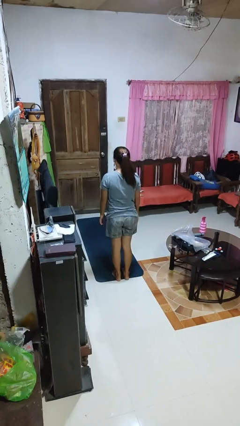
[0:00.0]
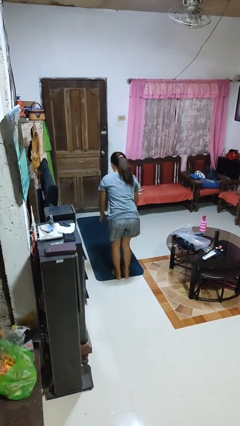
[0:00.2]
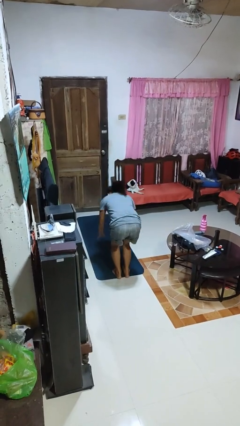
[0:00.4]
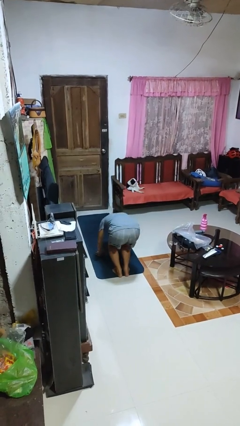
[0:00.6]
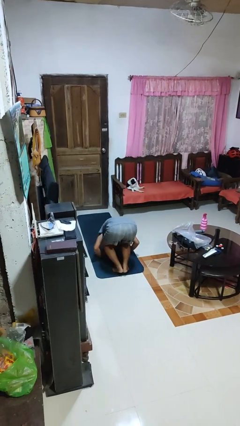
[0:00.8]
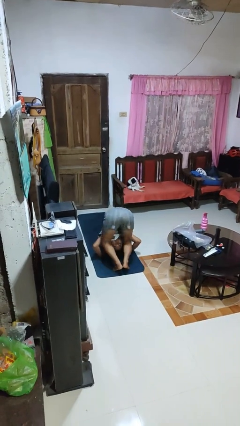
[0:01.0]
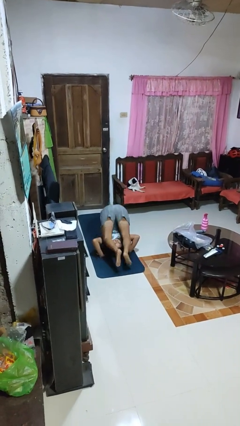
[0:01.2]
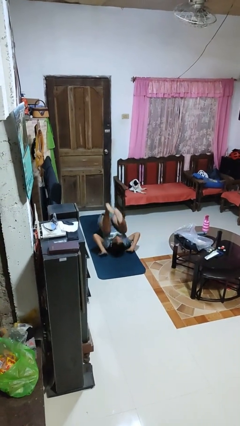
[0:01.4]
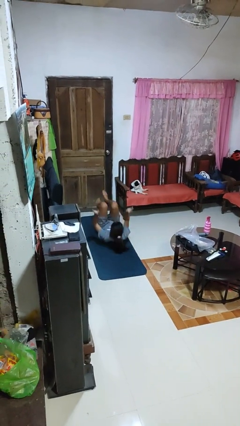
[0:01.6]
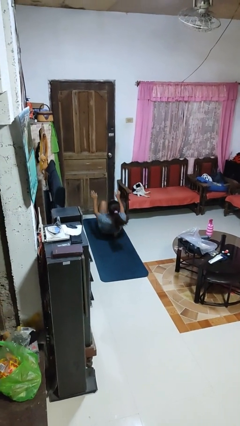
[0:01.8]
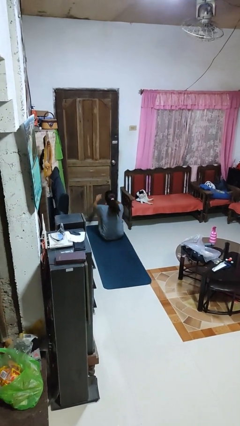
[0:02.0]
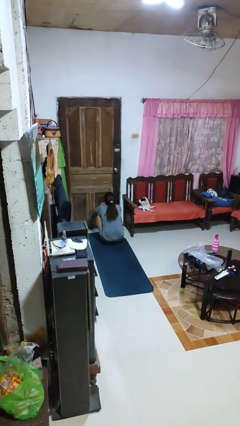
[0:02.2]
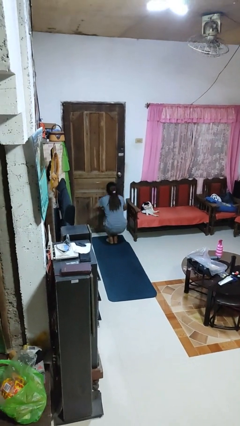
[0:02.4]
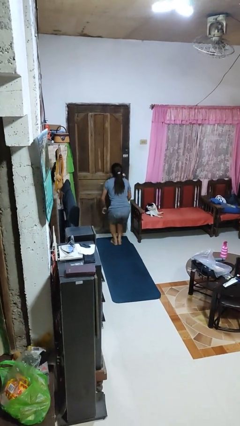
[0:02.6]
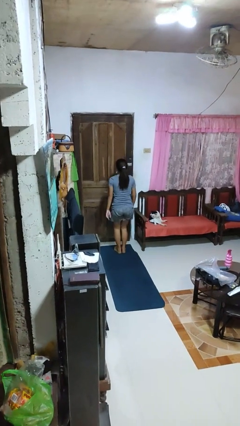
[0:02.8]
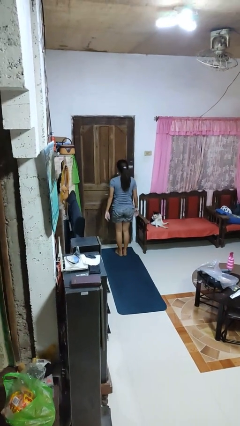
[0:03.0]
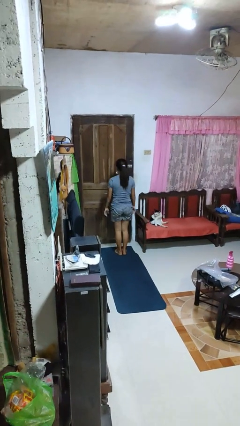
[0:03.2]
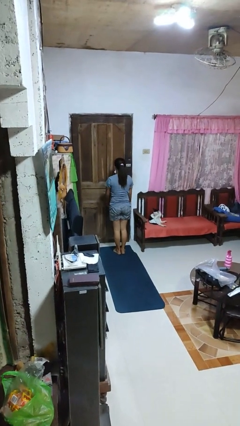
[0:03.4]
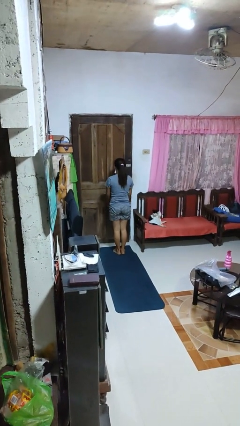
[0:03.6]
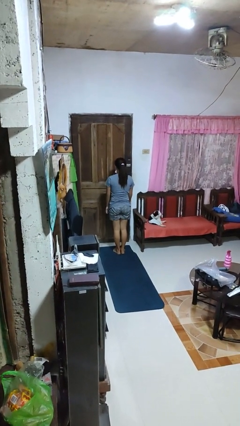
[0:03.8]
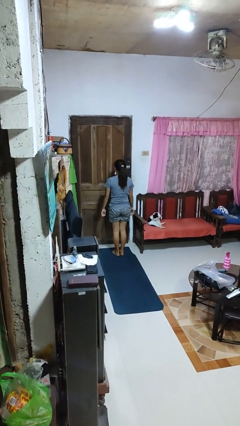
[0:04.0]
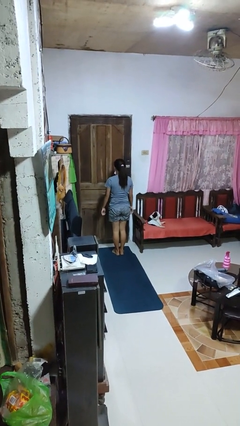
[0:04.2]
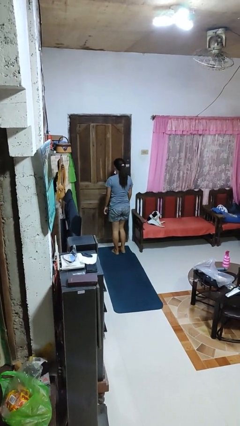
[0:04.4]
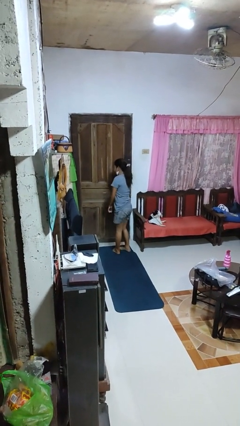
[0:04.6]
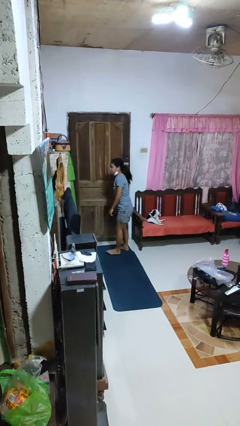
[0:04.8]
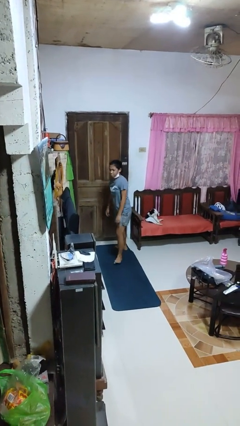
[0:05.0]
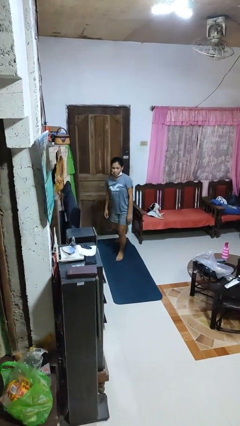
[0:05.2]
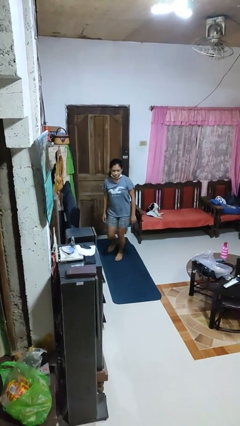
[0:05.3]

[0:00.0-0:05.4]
person somersaults

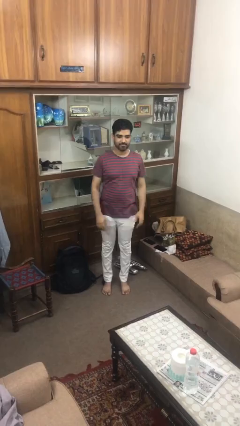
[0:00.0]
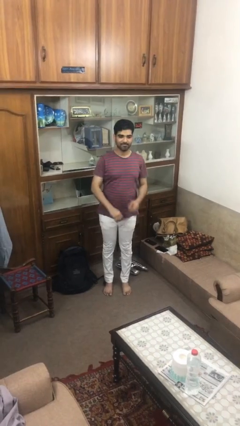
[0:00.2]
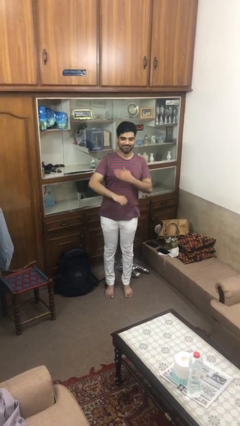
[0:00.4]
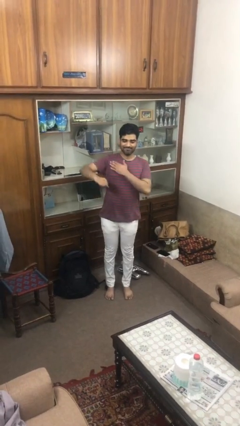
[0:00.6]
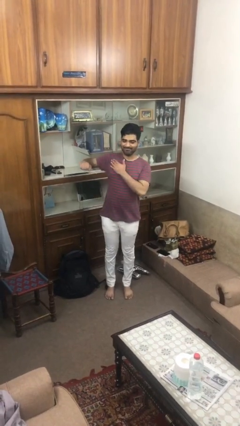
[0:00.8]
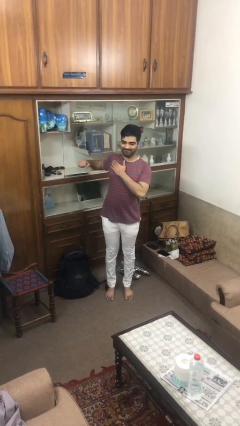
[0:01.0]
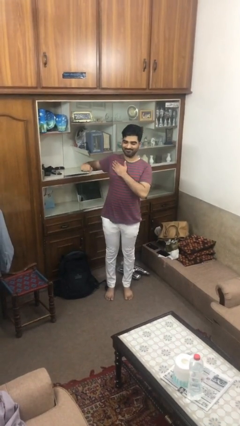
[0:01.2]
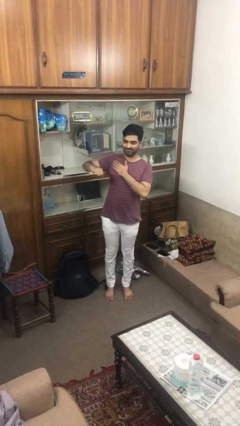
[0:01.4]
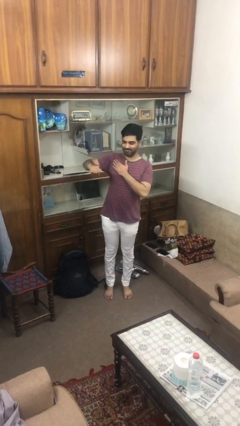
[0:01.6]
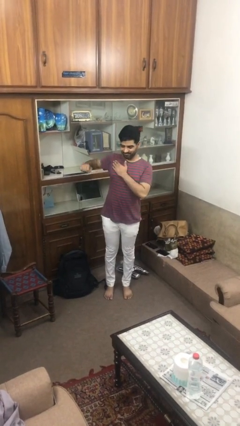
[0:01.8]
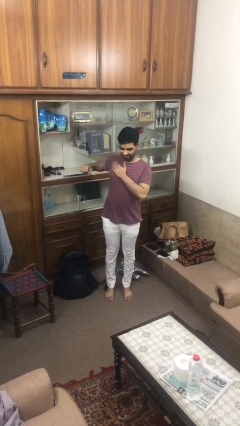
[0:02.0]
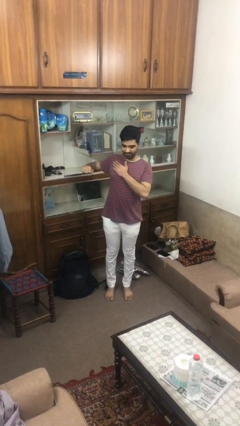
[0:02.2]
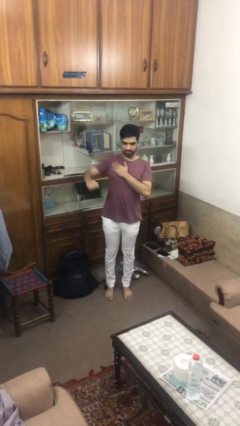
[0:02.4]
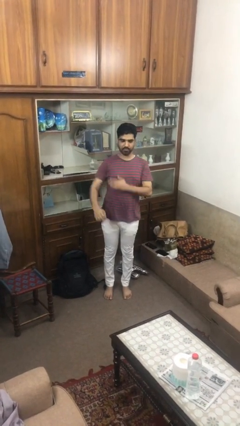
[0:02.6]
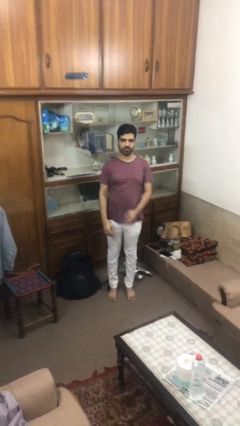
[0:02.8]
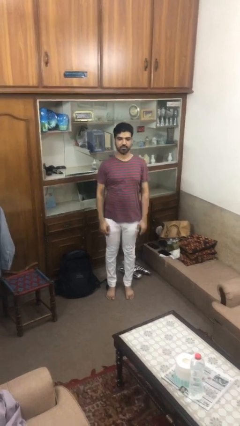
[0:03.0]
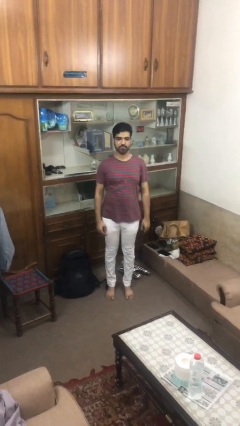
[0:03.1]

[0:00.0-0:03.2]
person stretches arms to side

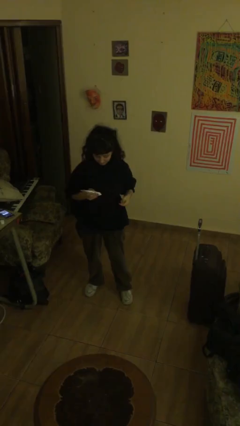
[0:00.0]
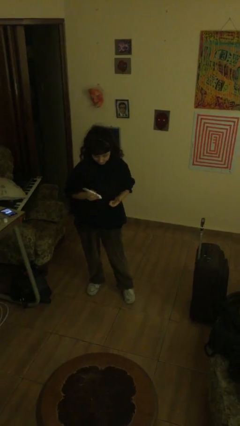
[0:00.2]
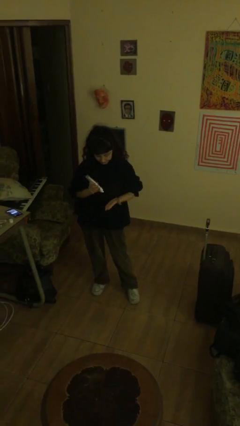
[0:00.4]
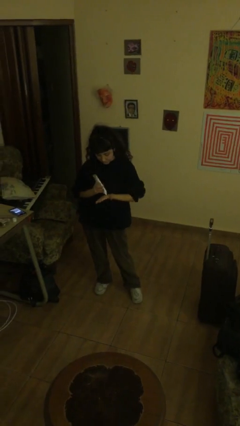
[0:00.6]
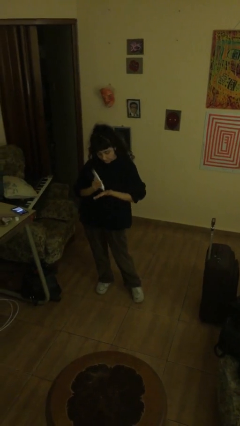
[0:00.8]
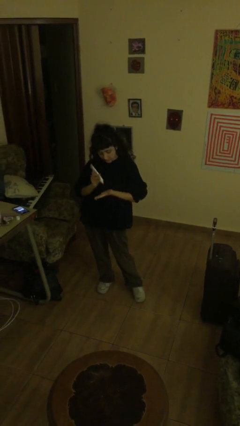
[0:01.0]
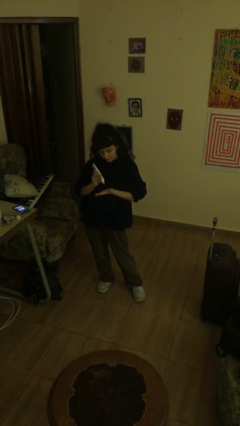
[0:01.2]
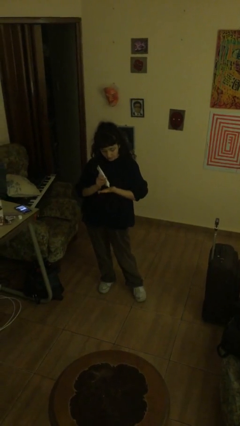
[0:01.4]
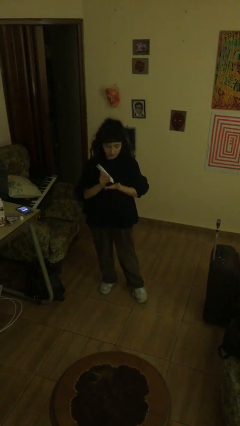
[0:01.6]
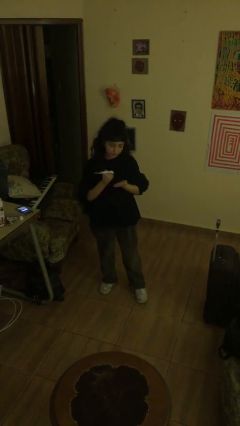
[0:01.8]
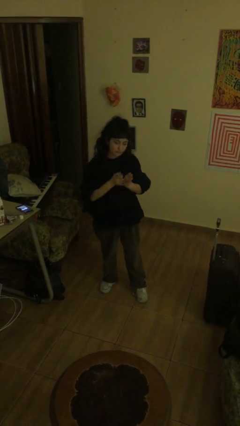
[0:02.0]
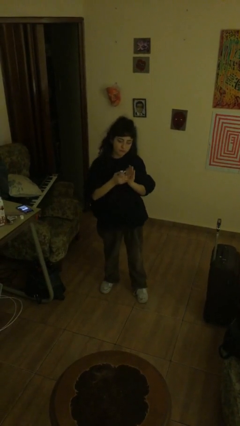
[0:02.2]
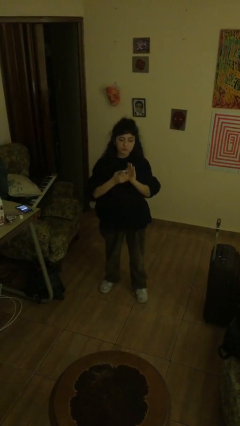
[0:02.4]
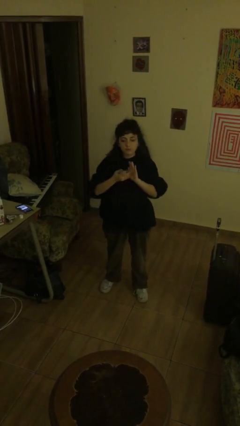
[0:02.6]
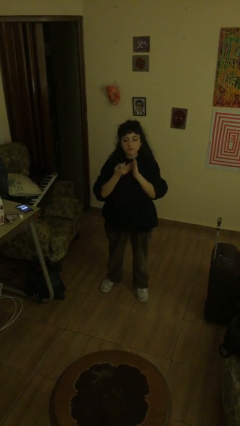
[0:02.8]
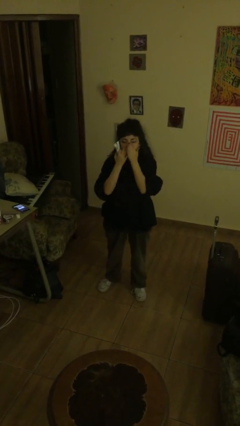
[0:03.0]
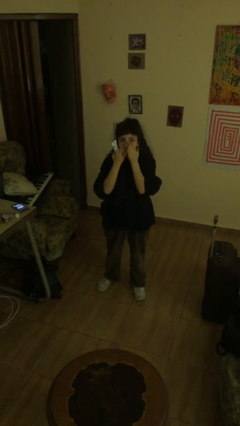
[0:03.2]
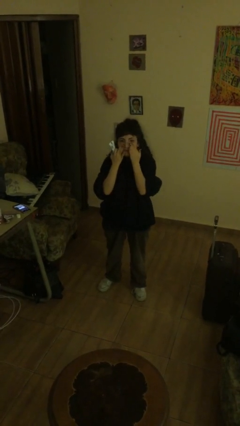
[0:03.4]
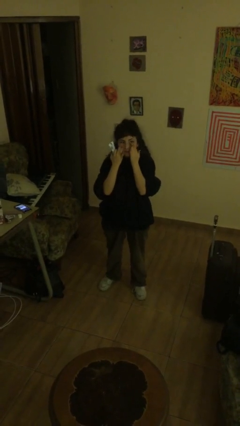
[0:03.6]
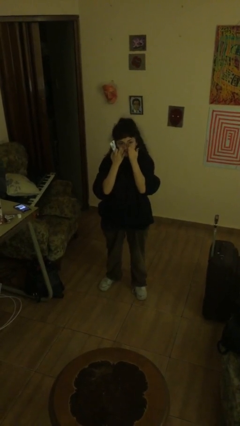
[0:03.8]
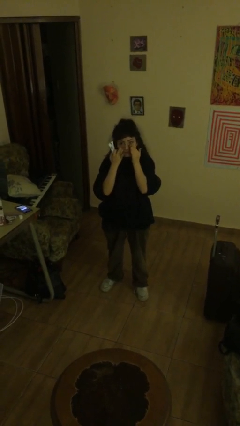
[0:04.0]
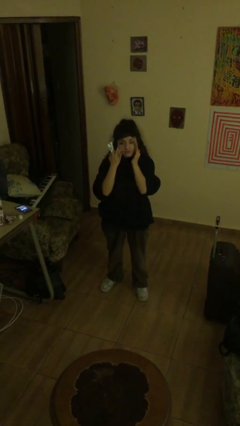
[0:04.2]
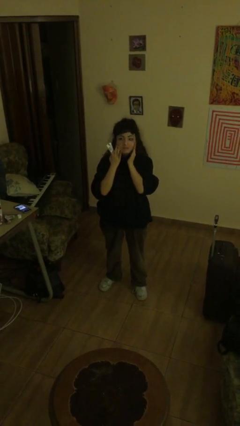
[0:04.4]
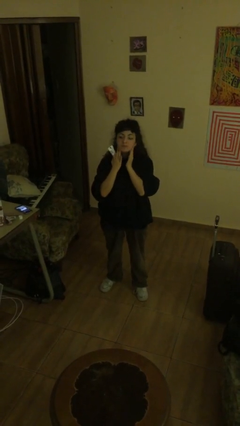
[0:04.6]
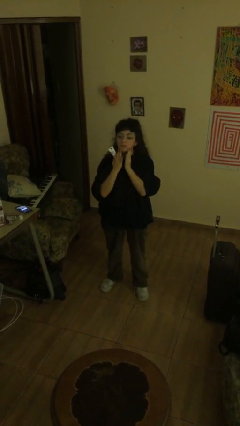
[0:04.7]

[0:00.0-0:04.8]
person applies sunscreen

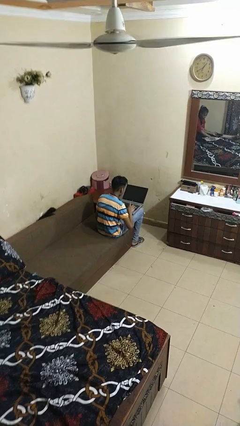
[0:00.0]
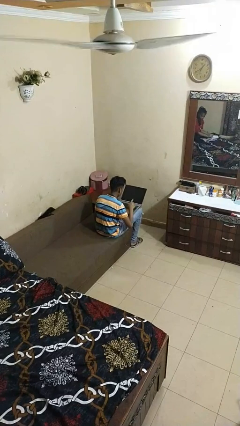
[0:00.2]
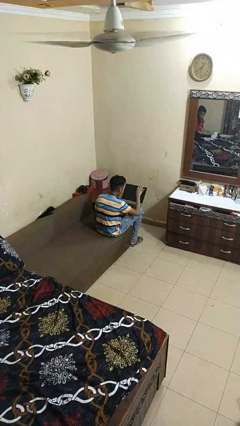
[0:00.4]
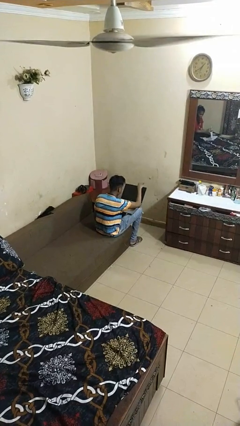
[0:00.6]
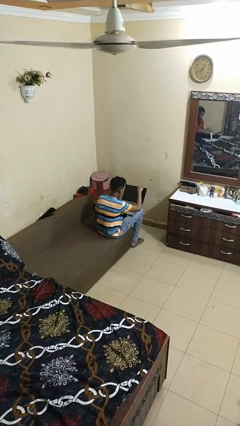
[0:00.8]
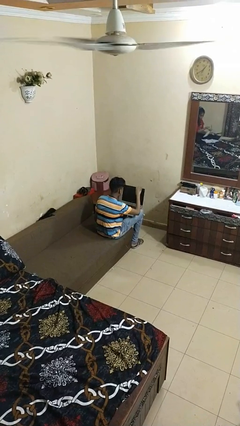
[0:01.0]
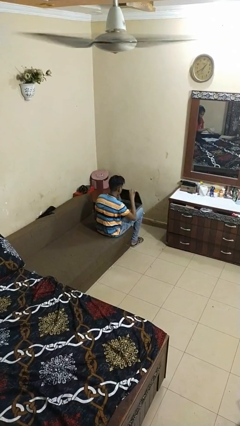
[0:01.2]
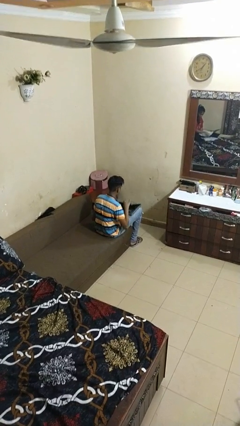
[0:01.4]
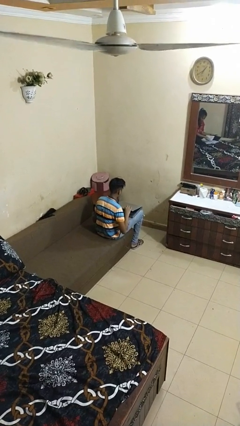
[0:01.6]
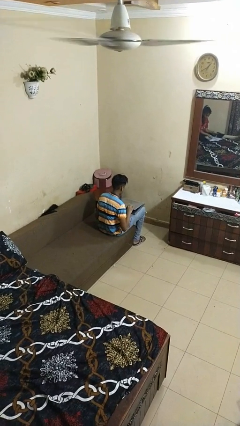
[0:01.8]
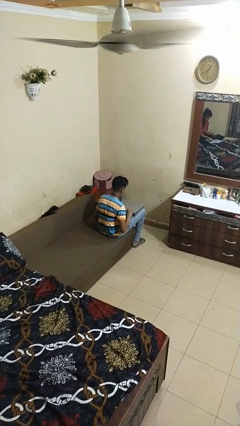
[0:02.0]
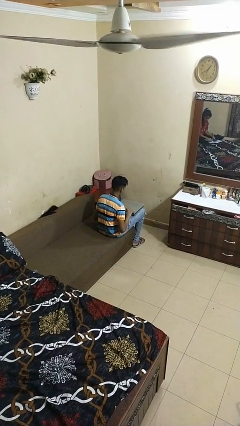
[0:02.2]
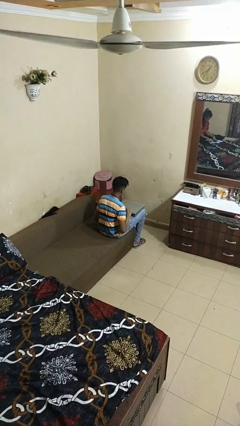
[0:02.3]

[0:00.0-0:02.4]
person closes laptop

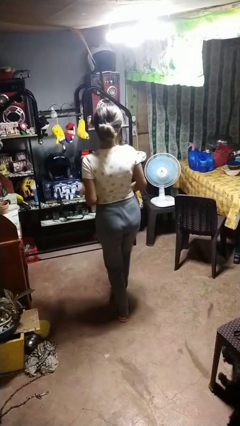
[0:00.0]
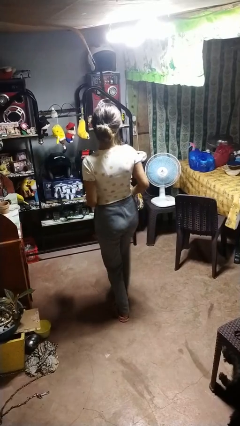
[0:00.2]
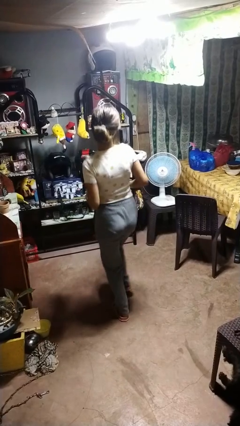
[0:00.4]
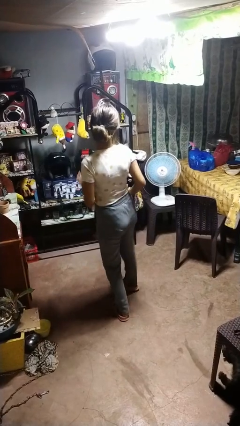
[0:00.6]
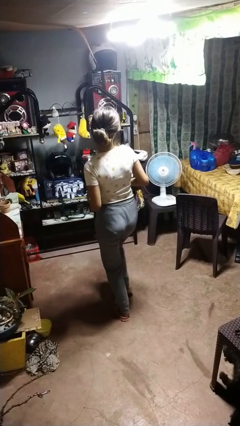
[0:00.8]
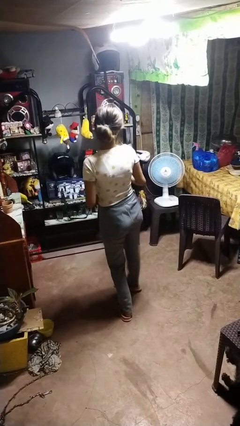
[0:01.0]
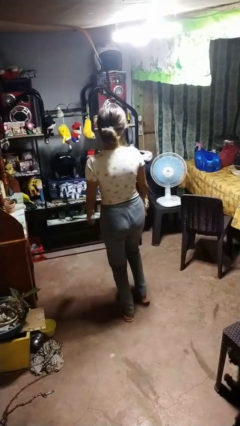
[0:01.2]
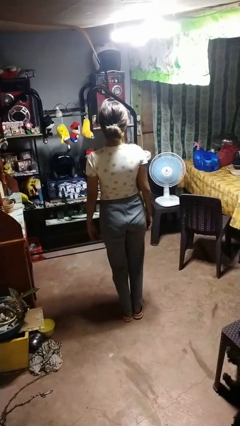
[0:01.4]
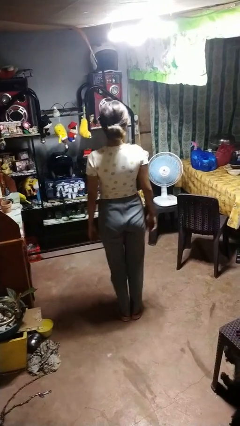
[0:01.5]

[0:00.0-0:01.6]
person dances in place
